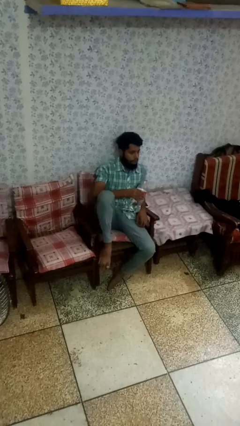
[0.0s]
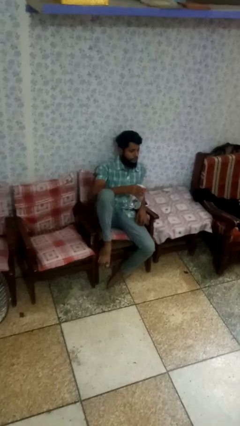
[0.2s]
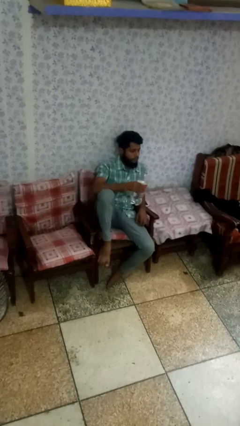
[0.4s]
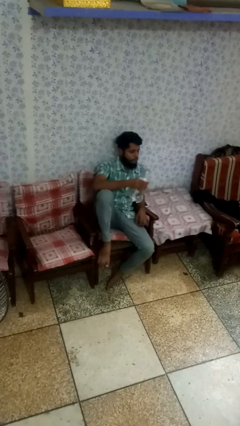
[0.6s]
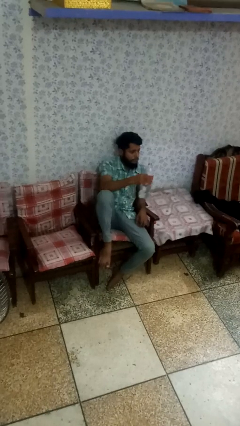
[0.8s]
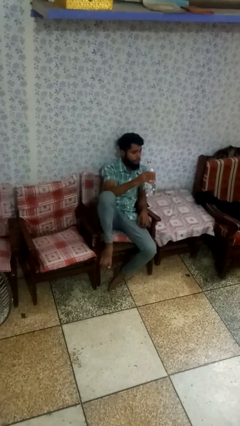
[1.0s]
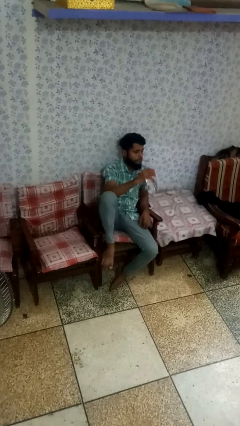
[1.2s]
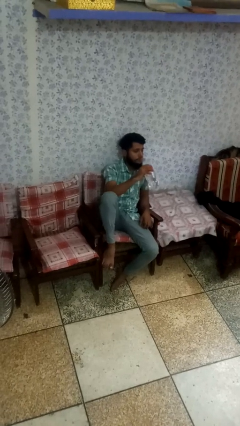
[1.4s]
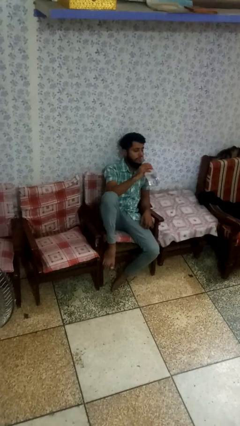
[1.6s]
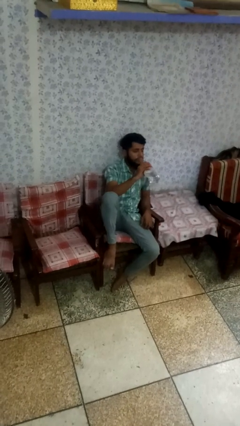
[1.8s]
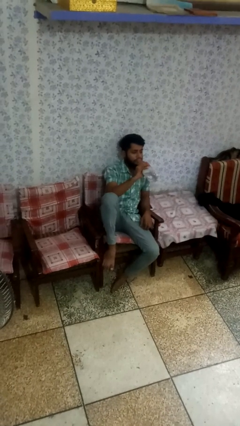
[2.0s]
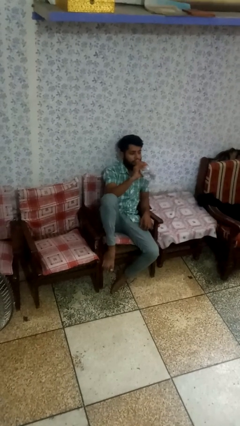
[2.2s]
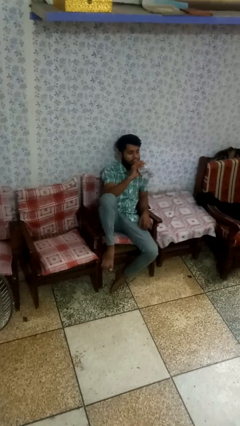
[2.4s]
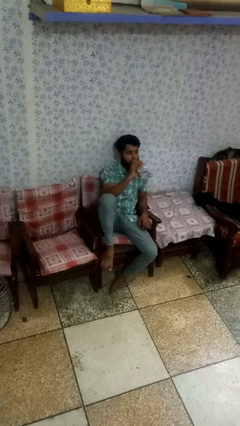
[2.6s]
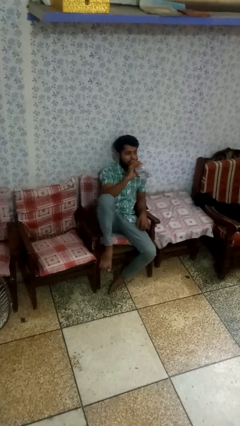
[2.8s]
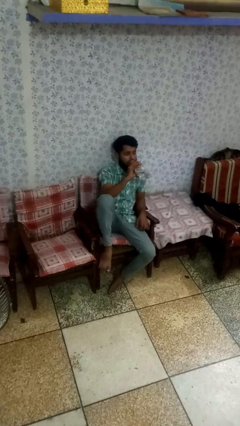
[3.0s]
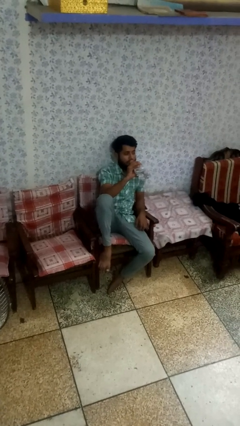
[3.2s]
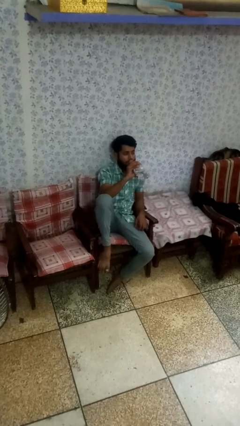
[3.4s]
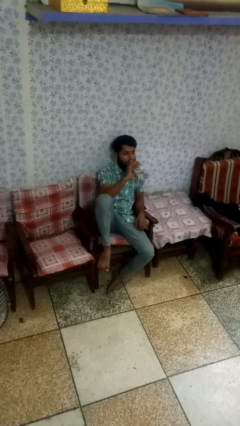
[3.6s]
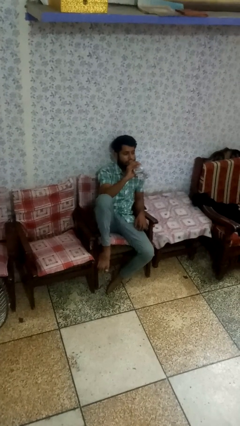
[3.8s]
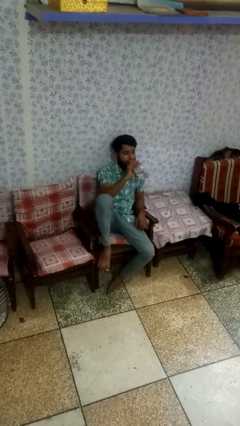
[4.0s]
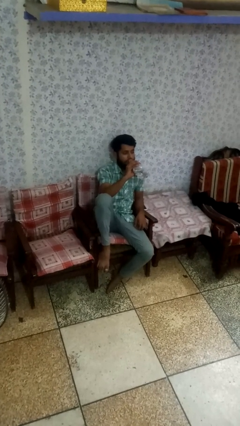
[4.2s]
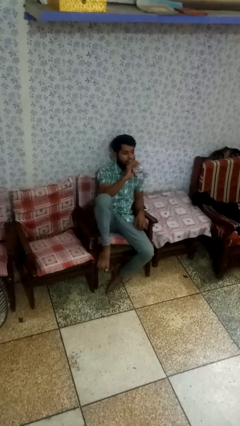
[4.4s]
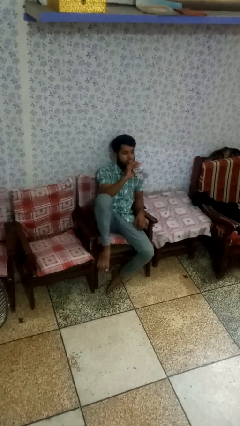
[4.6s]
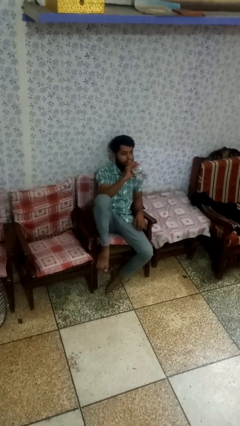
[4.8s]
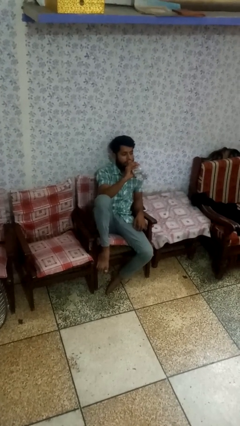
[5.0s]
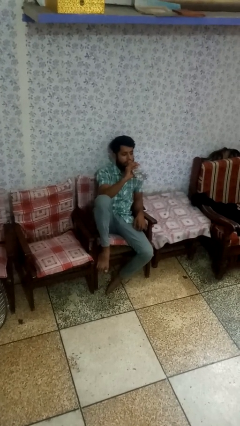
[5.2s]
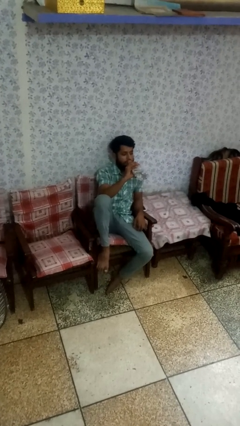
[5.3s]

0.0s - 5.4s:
person drinks from bottle

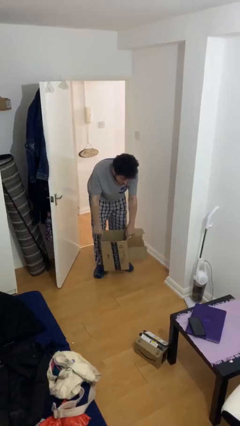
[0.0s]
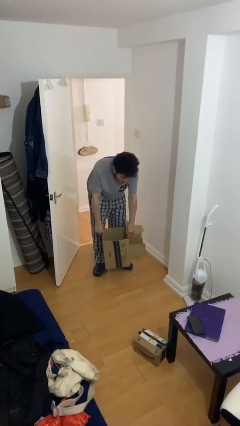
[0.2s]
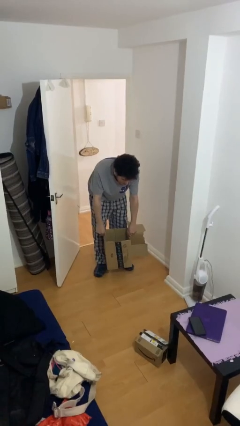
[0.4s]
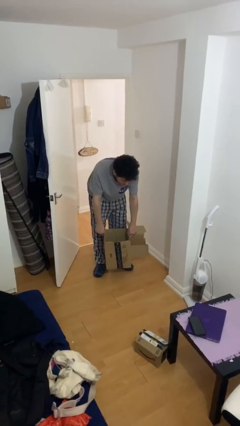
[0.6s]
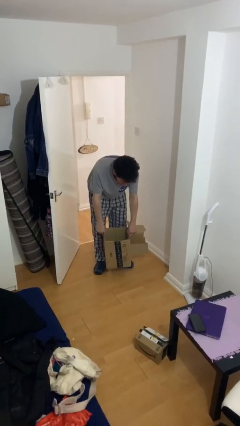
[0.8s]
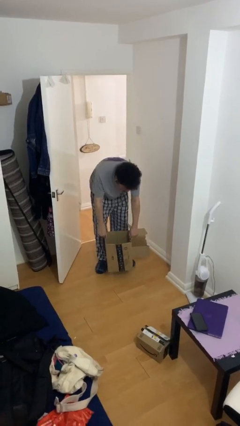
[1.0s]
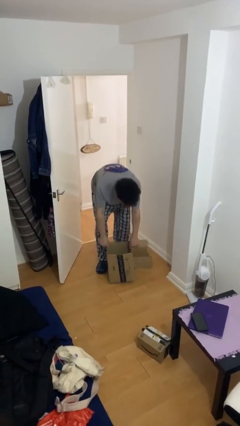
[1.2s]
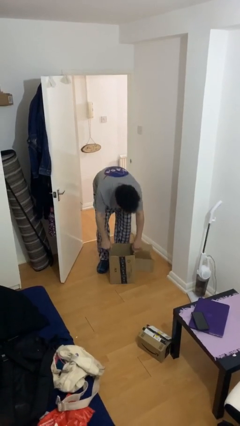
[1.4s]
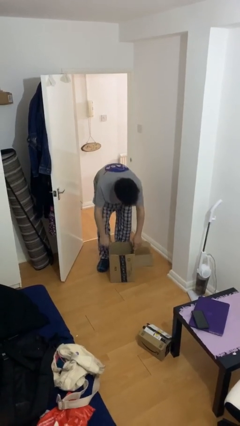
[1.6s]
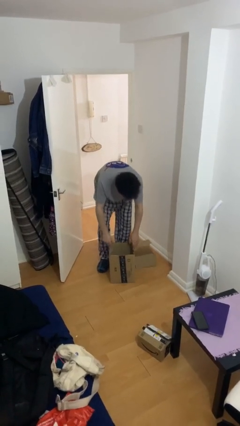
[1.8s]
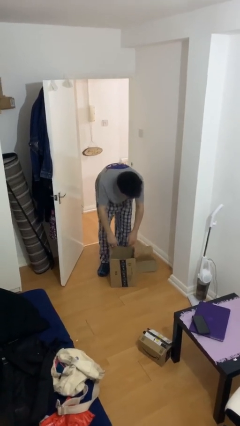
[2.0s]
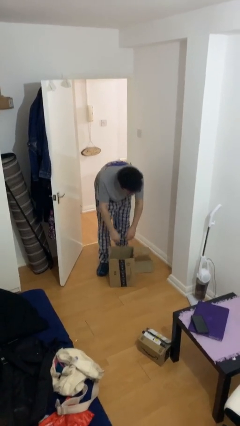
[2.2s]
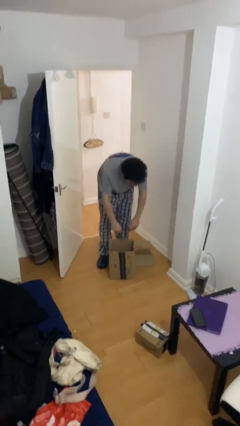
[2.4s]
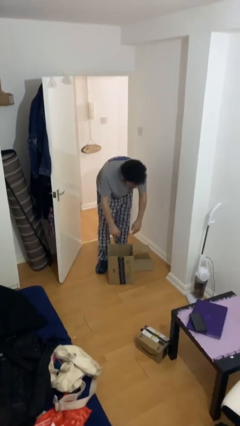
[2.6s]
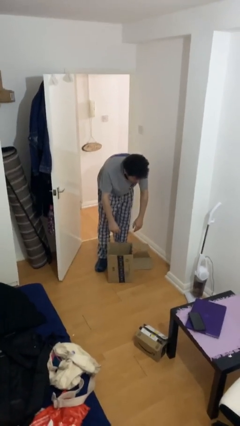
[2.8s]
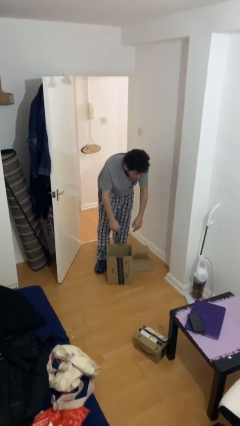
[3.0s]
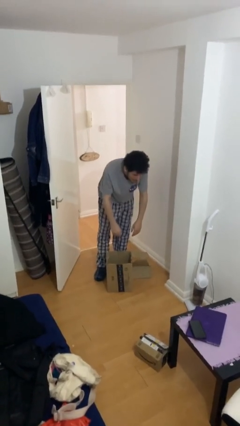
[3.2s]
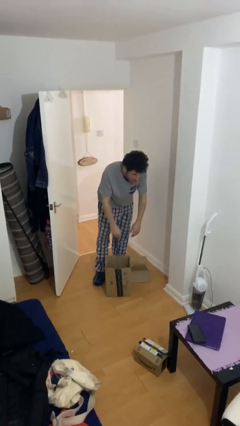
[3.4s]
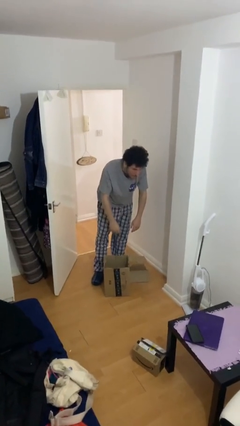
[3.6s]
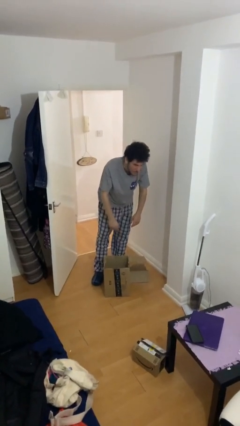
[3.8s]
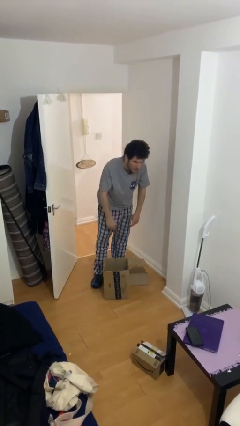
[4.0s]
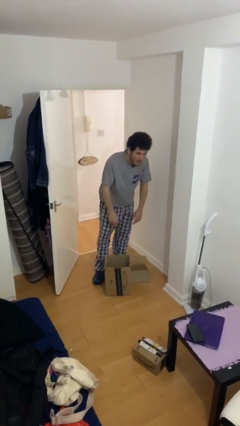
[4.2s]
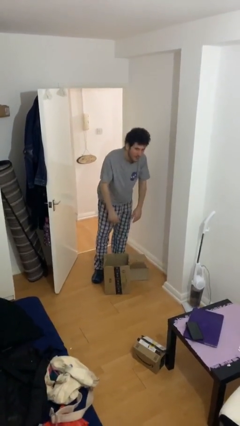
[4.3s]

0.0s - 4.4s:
person puts down object on floor

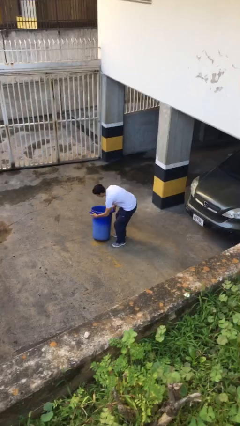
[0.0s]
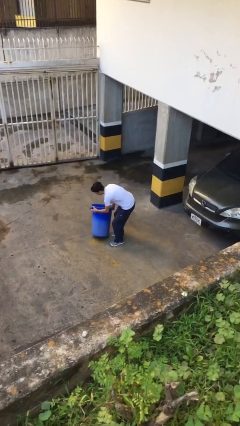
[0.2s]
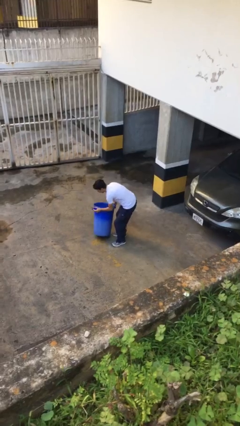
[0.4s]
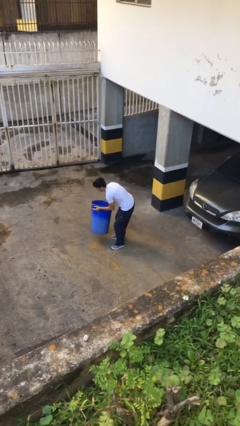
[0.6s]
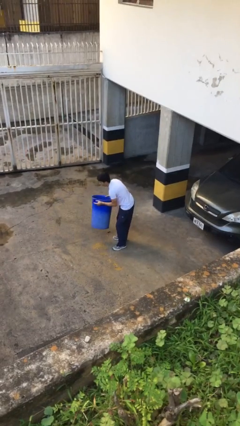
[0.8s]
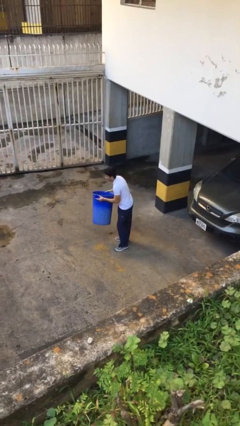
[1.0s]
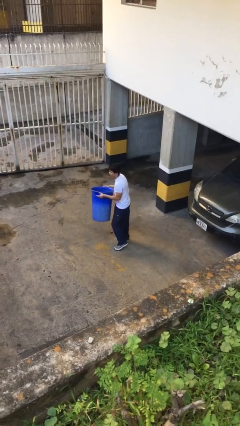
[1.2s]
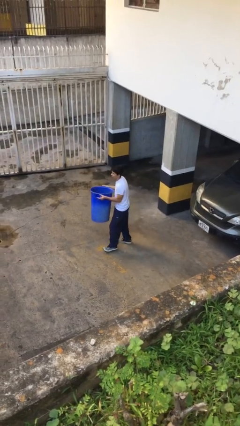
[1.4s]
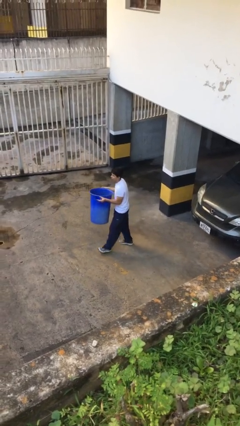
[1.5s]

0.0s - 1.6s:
person picks up object from floor

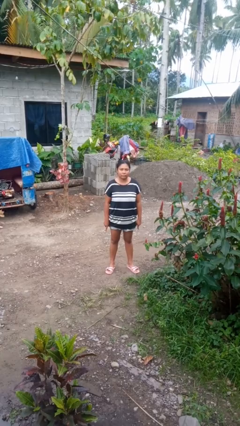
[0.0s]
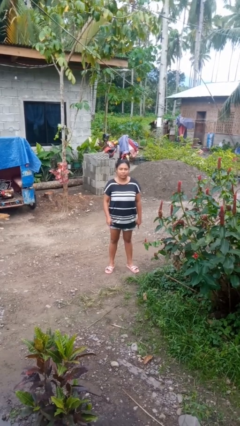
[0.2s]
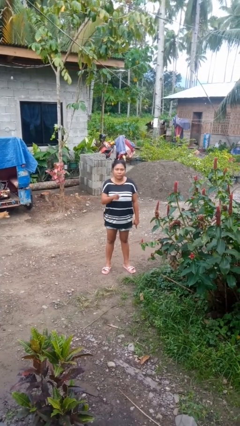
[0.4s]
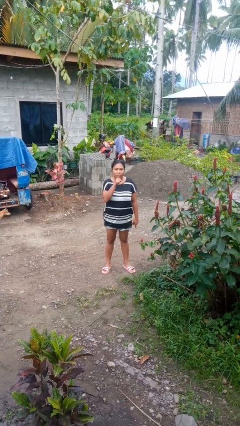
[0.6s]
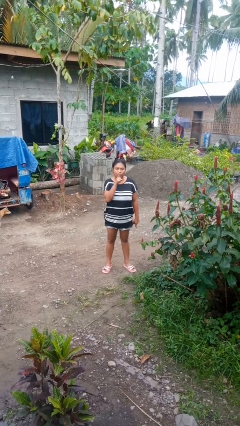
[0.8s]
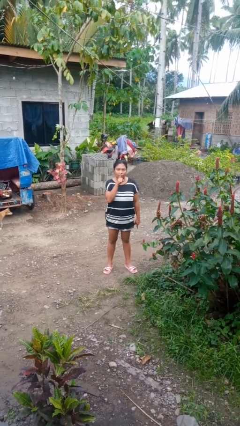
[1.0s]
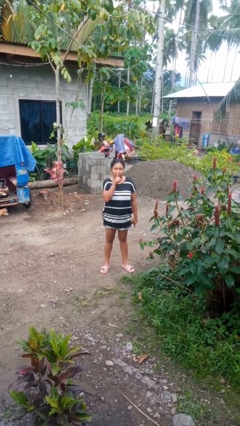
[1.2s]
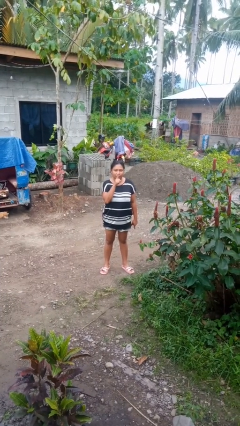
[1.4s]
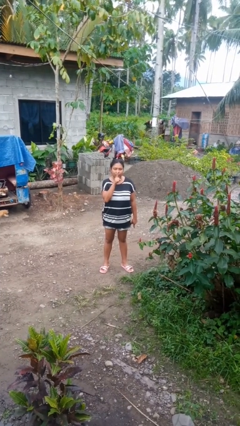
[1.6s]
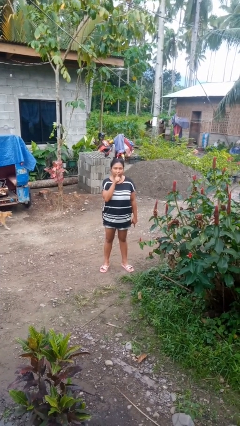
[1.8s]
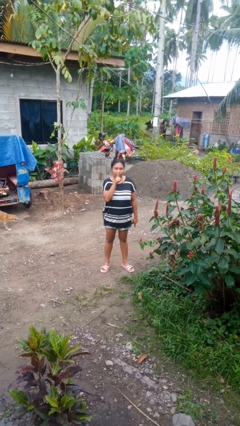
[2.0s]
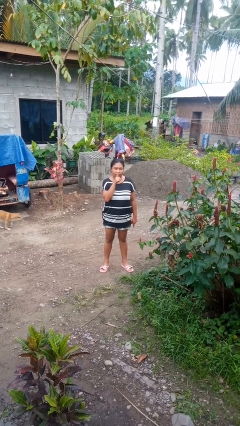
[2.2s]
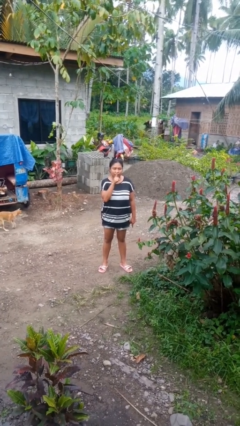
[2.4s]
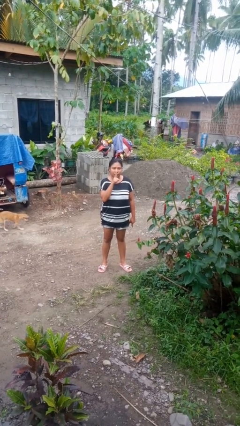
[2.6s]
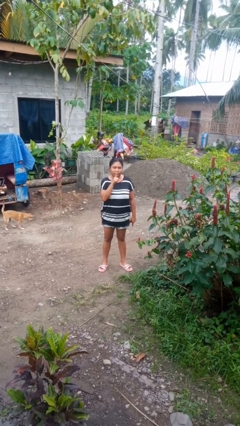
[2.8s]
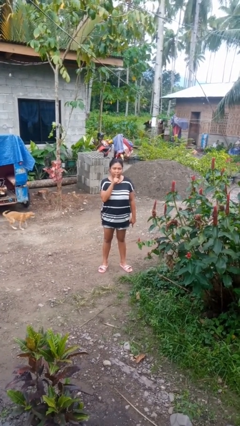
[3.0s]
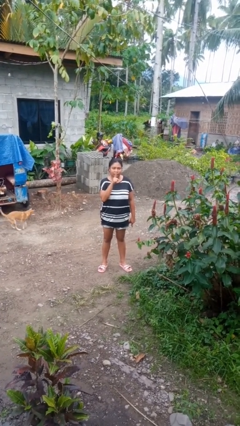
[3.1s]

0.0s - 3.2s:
person gestures be quiet

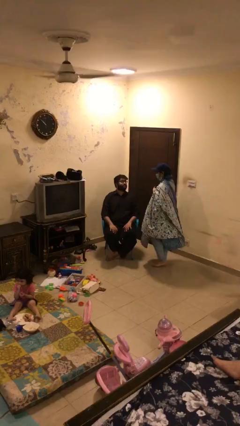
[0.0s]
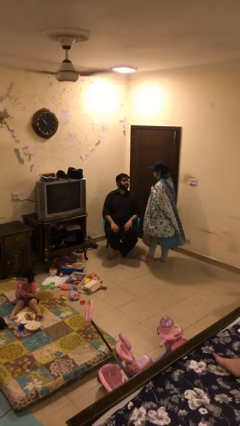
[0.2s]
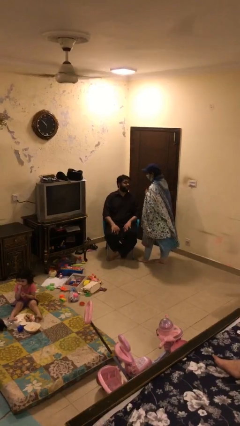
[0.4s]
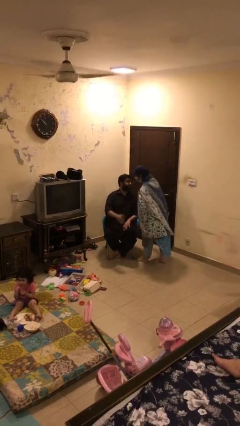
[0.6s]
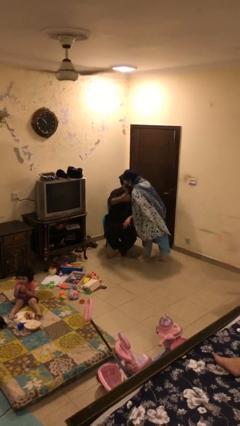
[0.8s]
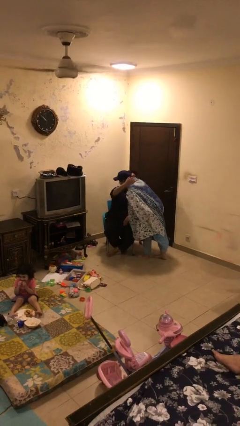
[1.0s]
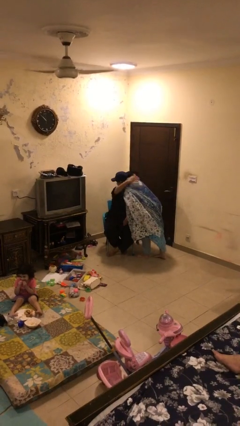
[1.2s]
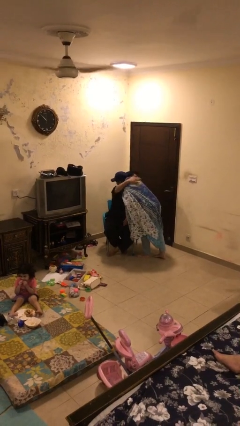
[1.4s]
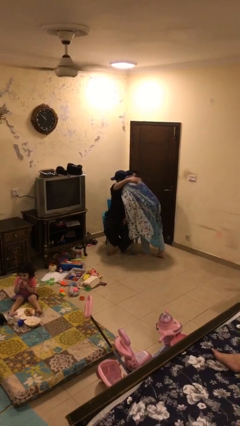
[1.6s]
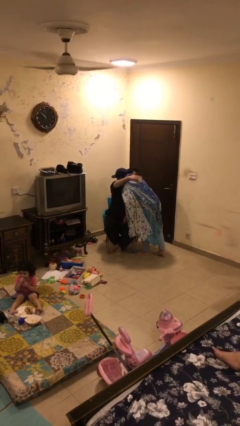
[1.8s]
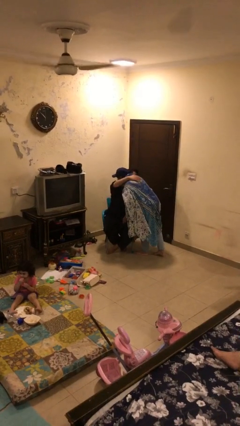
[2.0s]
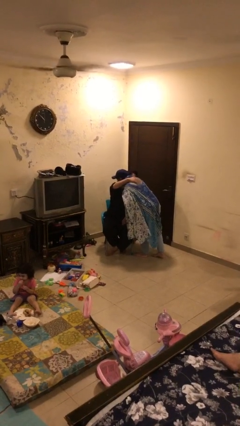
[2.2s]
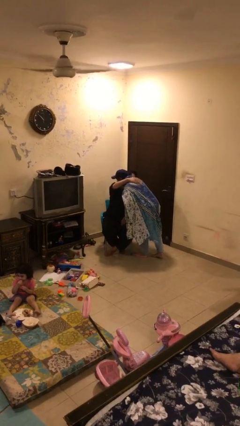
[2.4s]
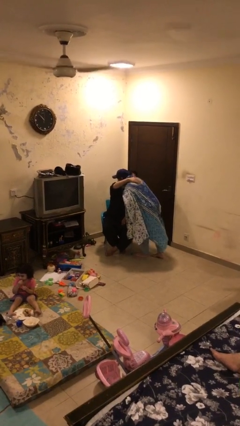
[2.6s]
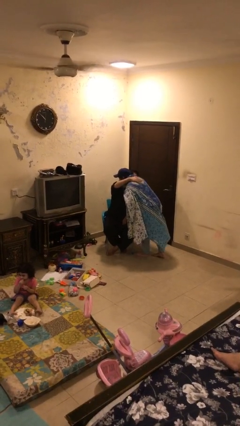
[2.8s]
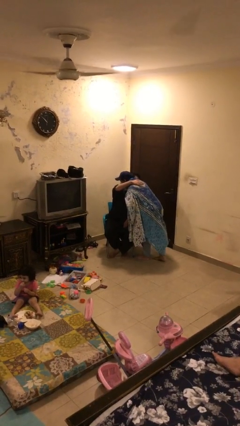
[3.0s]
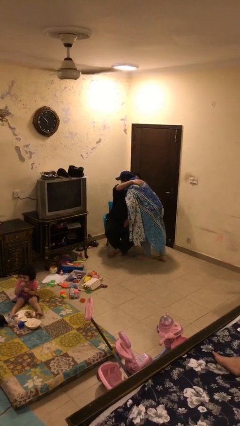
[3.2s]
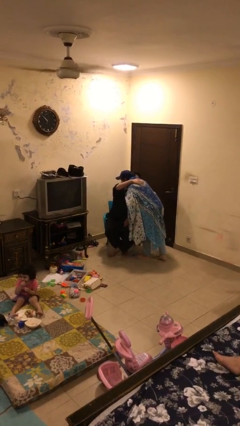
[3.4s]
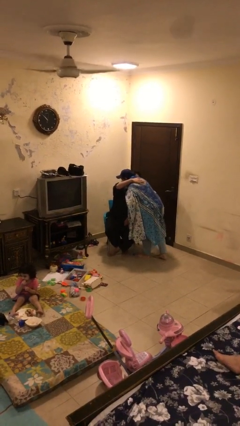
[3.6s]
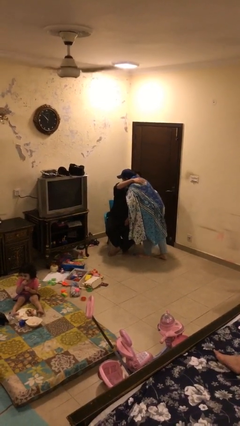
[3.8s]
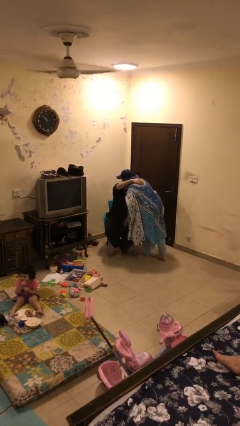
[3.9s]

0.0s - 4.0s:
person embraces person
